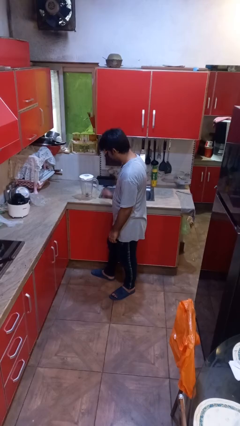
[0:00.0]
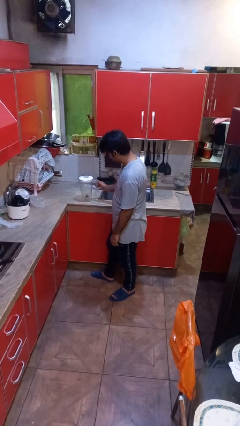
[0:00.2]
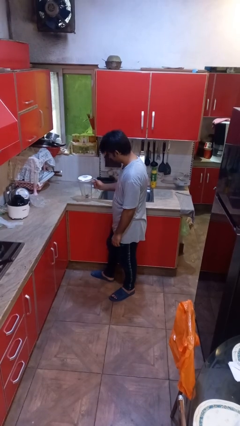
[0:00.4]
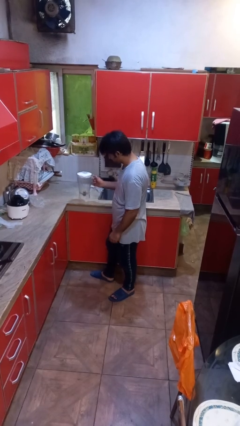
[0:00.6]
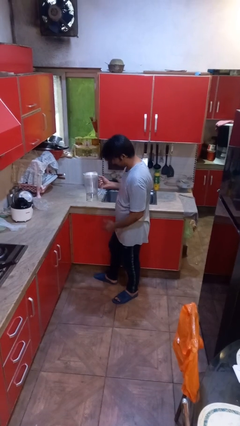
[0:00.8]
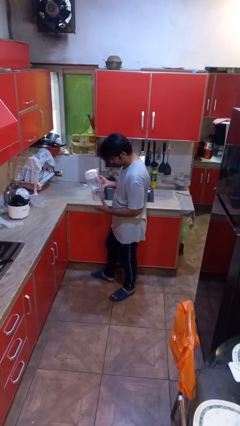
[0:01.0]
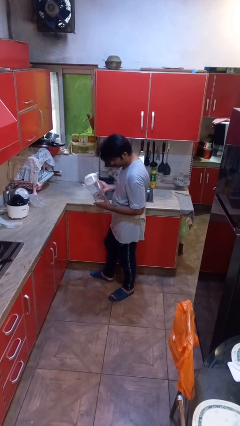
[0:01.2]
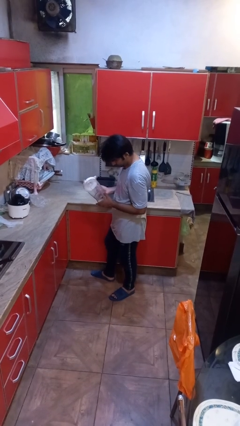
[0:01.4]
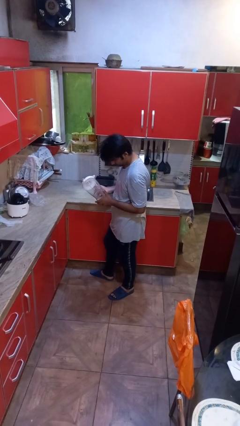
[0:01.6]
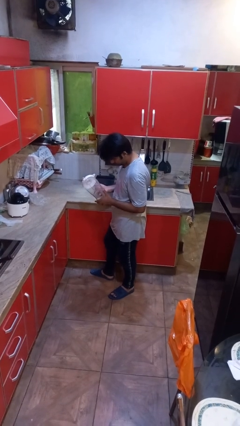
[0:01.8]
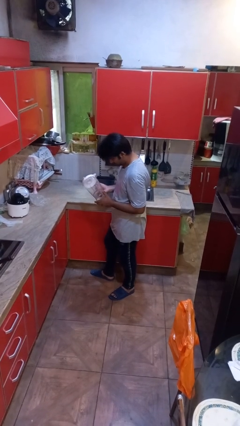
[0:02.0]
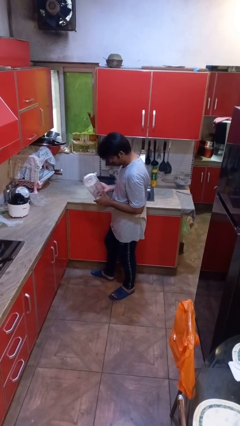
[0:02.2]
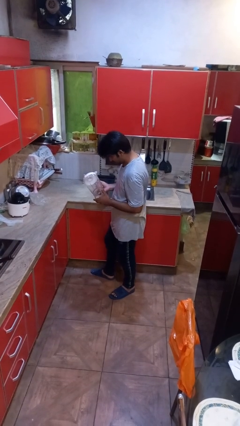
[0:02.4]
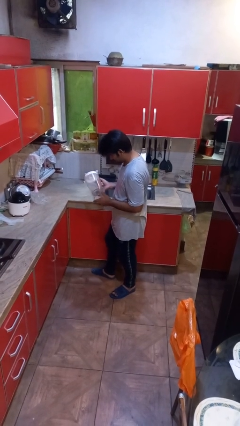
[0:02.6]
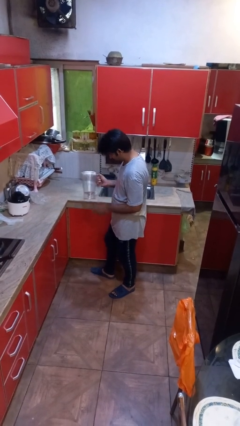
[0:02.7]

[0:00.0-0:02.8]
person picks up object from countertop

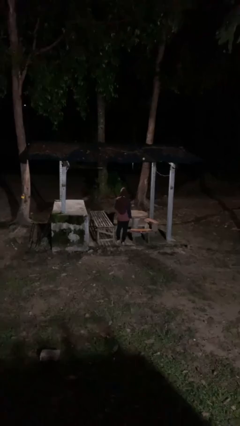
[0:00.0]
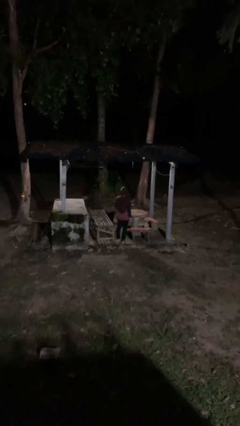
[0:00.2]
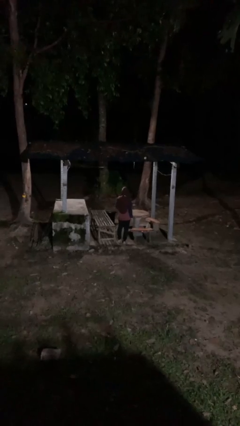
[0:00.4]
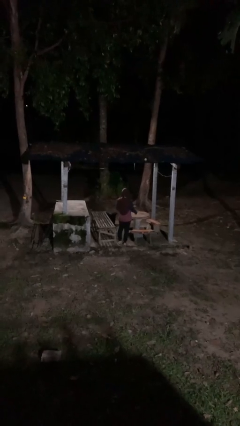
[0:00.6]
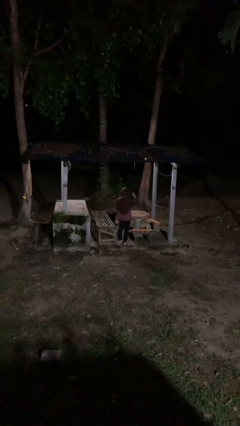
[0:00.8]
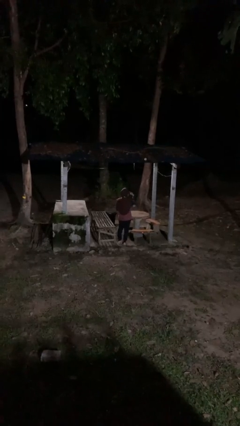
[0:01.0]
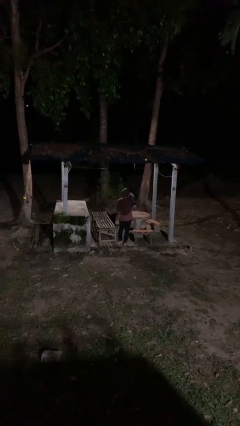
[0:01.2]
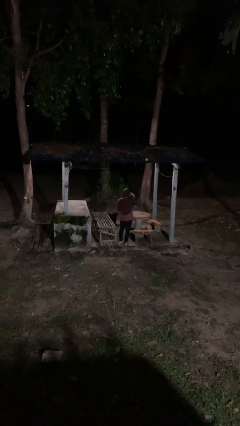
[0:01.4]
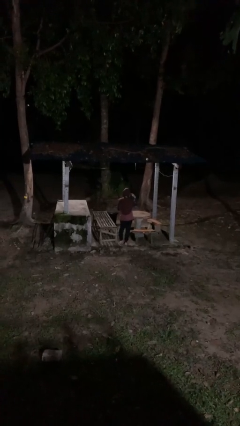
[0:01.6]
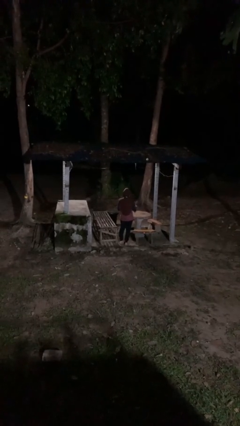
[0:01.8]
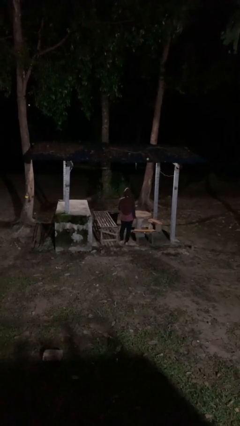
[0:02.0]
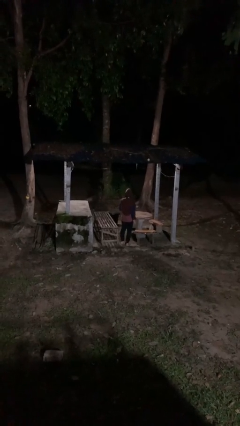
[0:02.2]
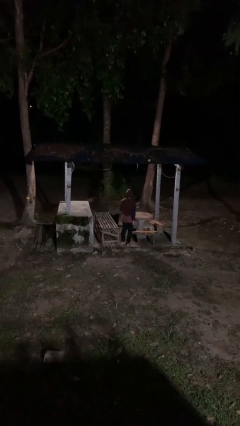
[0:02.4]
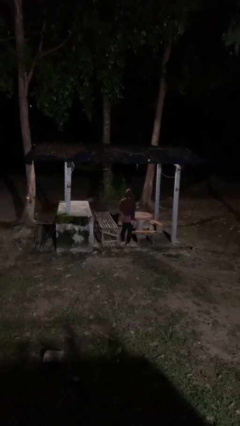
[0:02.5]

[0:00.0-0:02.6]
person gestures watch closely

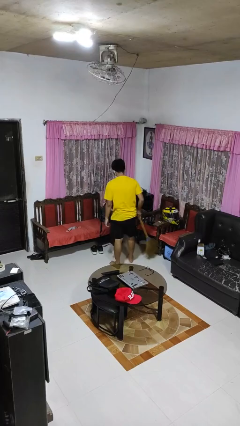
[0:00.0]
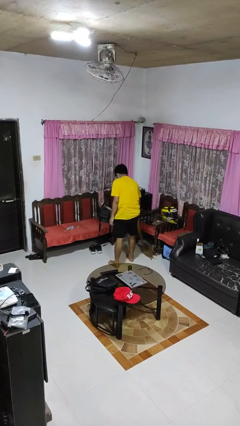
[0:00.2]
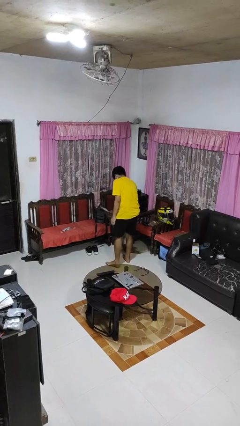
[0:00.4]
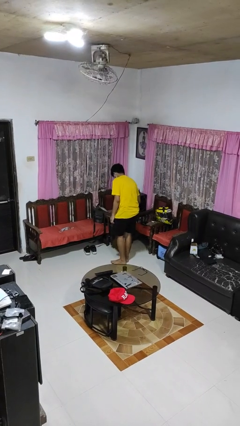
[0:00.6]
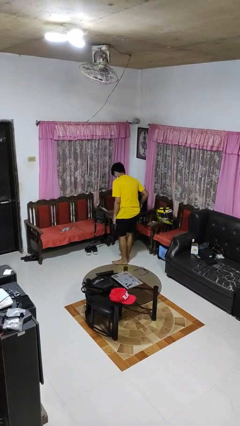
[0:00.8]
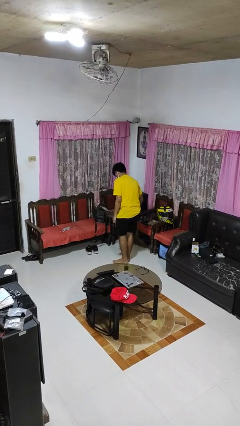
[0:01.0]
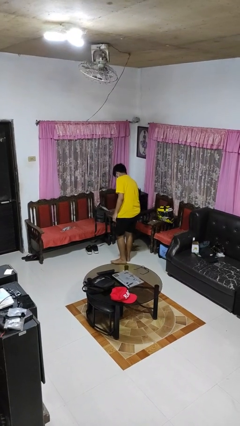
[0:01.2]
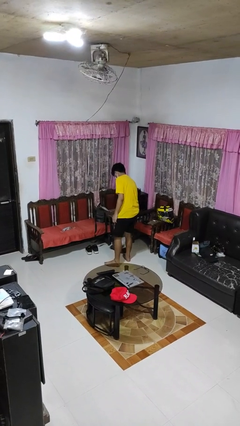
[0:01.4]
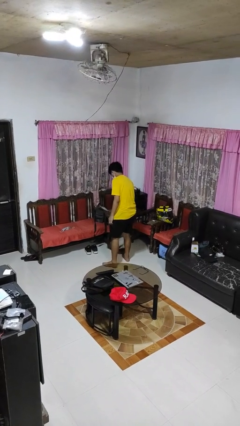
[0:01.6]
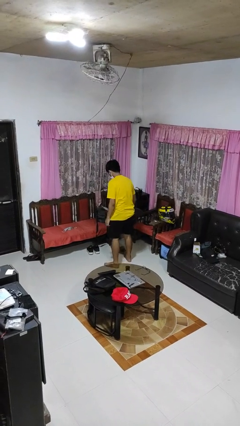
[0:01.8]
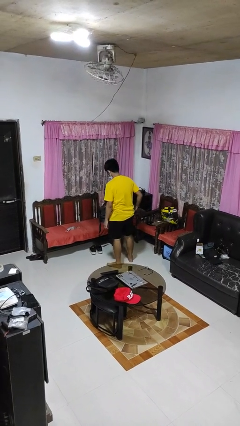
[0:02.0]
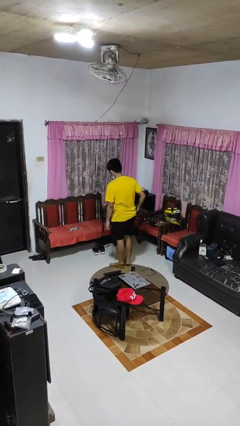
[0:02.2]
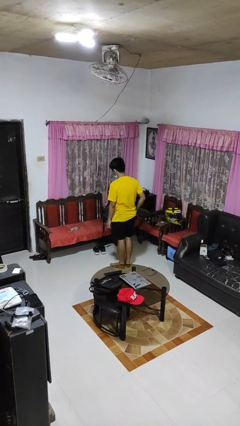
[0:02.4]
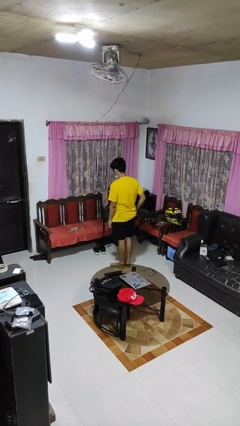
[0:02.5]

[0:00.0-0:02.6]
person sweeps floor

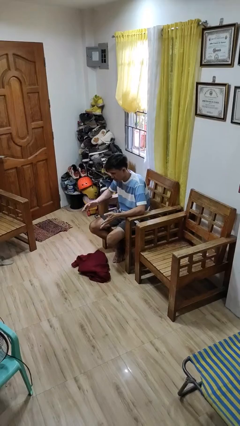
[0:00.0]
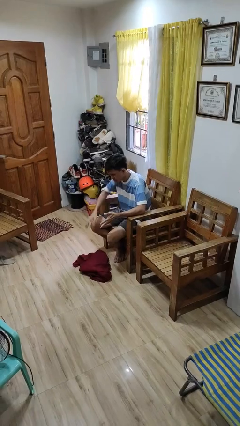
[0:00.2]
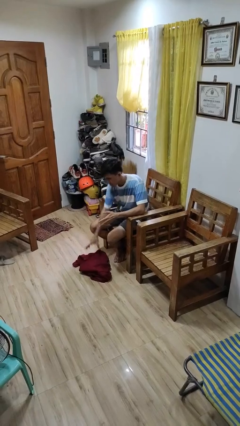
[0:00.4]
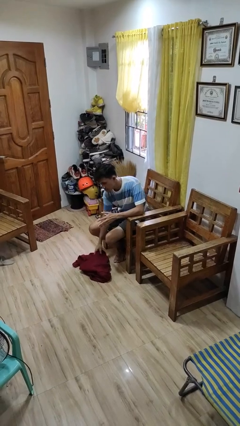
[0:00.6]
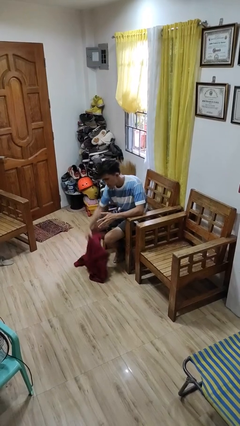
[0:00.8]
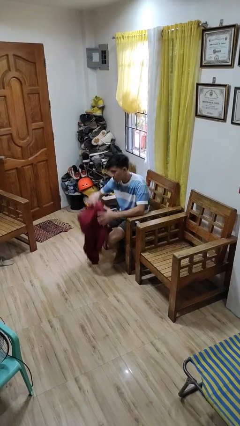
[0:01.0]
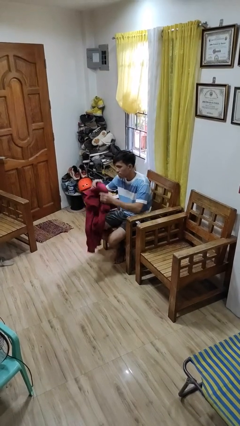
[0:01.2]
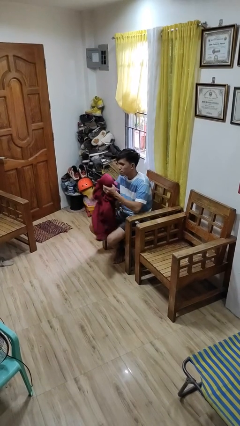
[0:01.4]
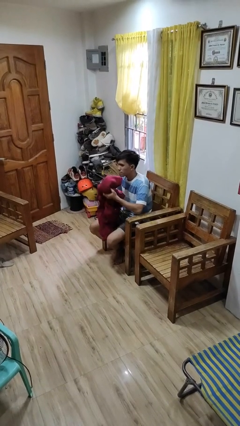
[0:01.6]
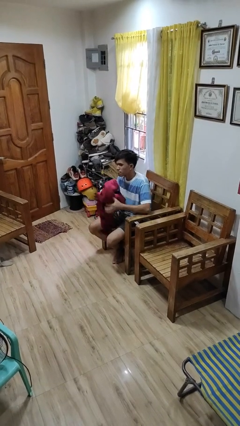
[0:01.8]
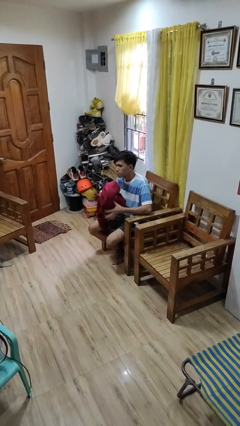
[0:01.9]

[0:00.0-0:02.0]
person picks up object from floor

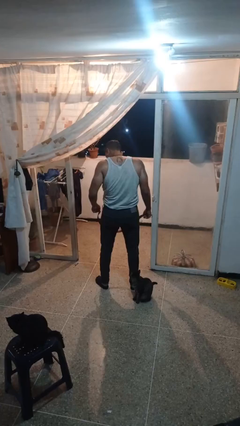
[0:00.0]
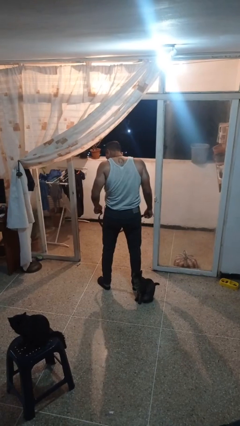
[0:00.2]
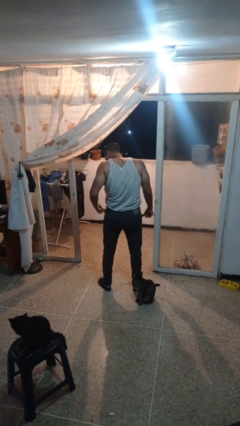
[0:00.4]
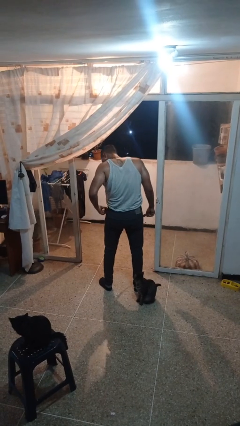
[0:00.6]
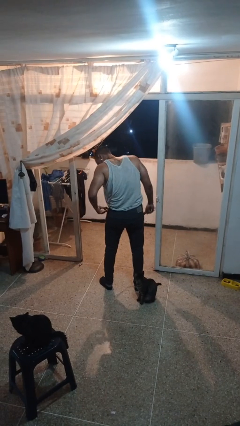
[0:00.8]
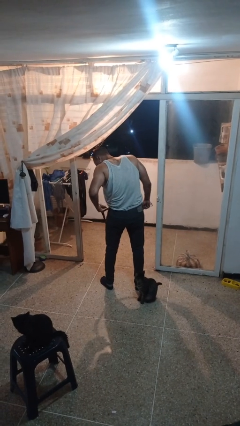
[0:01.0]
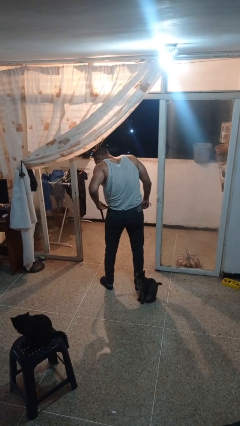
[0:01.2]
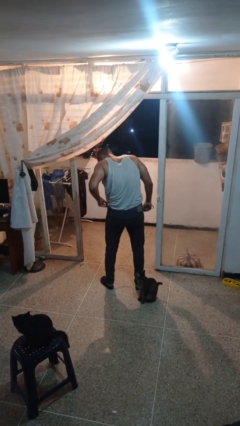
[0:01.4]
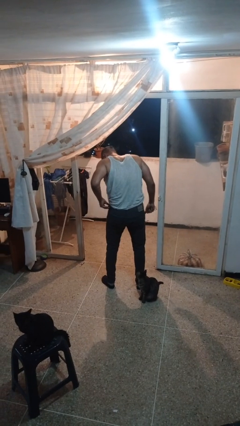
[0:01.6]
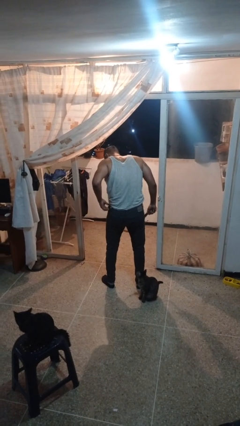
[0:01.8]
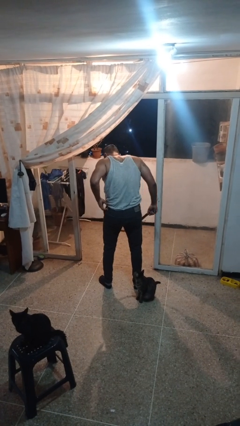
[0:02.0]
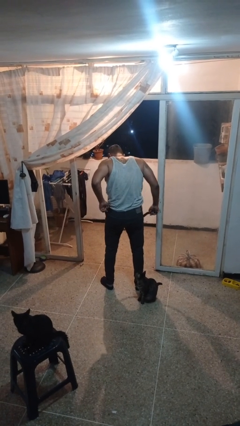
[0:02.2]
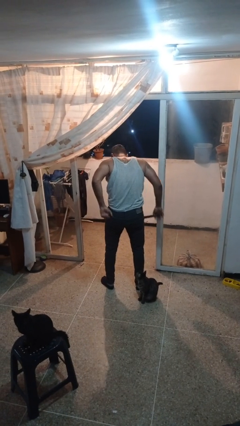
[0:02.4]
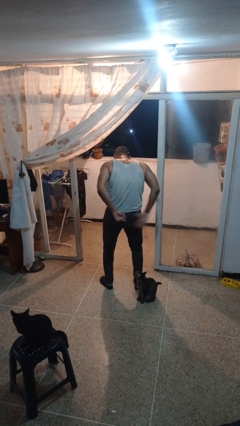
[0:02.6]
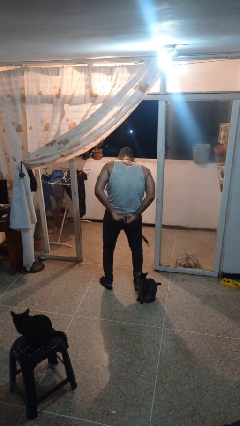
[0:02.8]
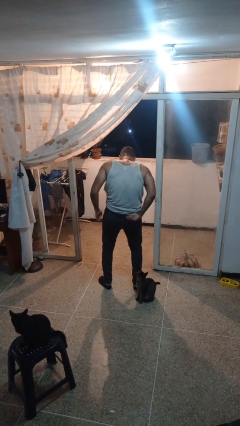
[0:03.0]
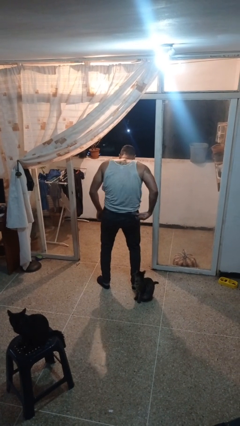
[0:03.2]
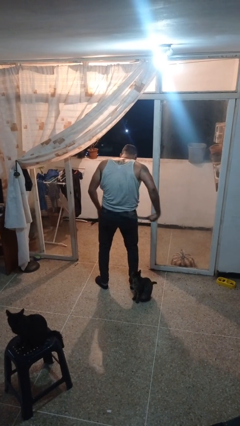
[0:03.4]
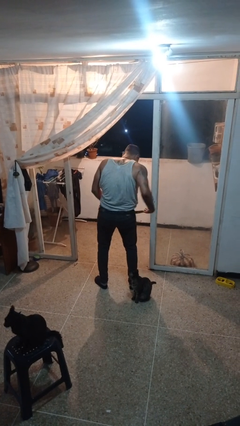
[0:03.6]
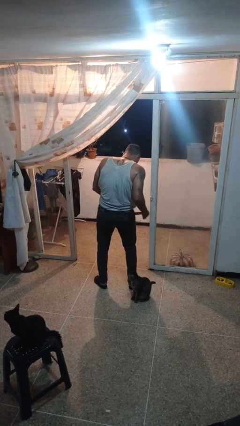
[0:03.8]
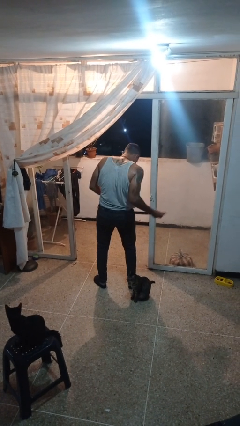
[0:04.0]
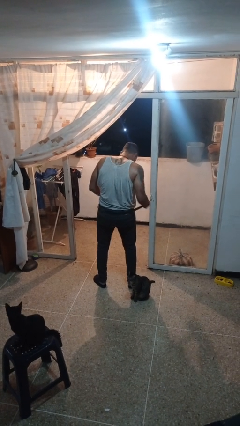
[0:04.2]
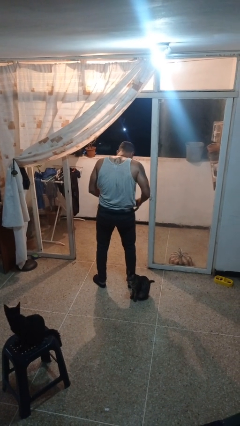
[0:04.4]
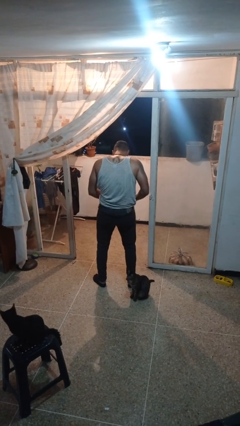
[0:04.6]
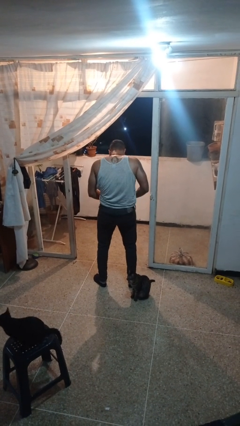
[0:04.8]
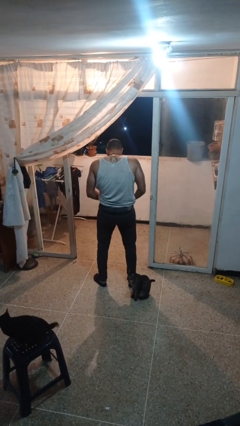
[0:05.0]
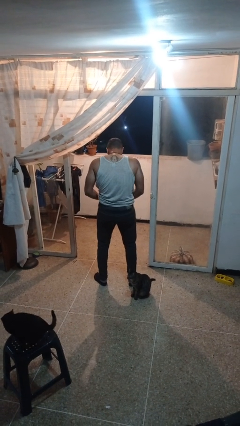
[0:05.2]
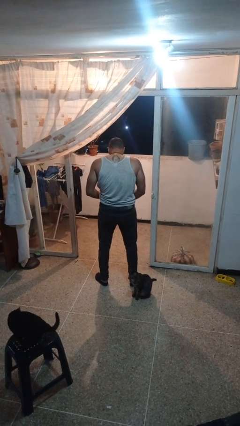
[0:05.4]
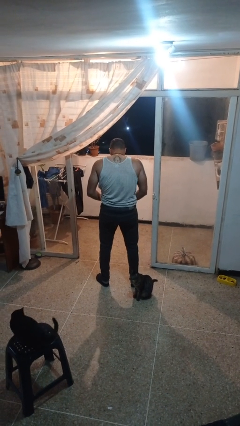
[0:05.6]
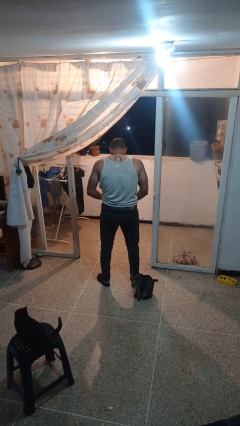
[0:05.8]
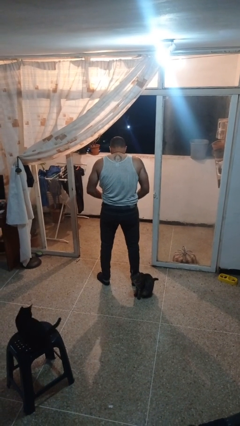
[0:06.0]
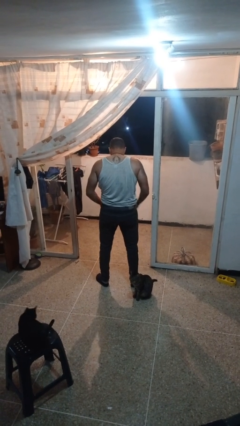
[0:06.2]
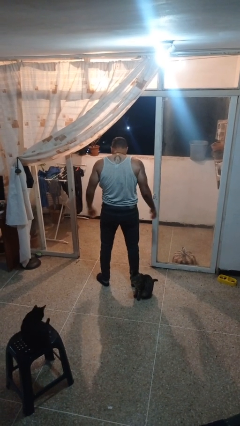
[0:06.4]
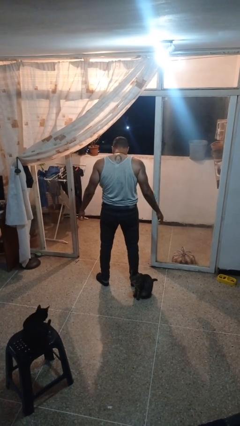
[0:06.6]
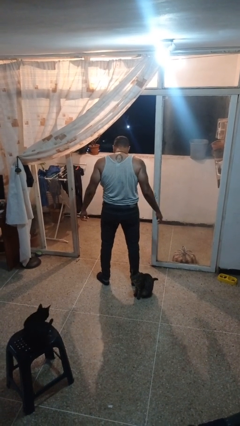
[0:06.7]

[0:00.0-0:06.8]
person puts on belt

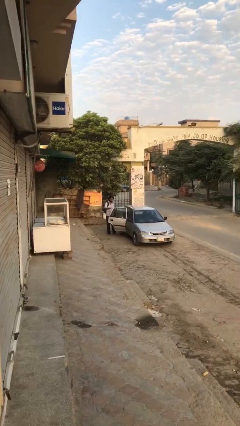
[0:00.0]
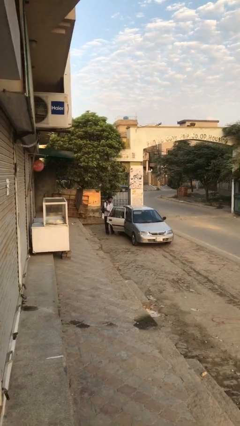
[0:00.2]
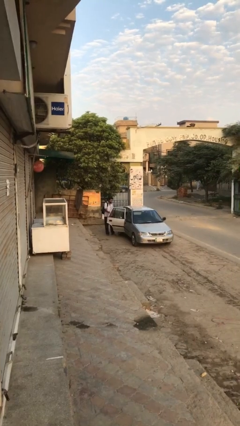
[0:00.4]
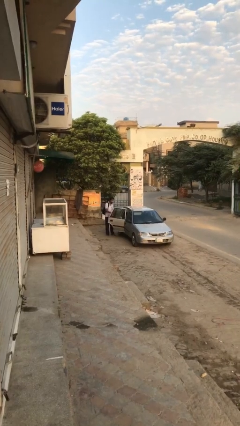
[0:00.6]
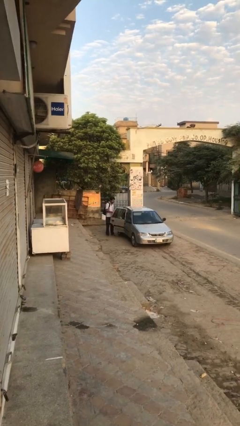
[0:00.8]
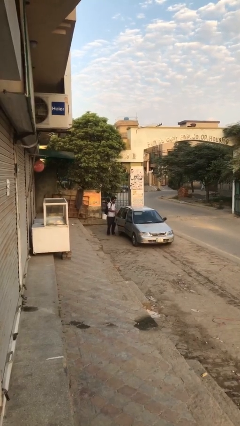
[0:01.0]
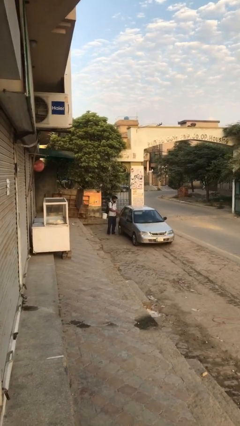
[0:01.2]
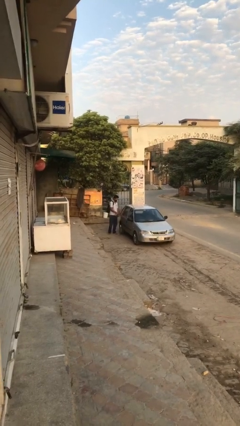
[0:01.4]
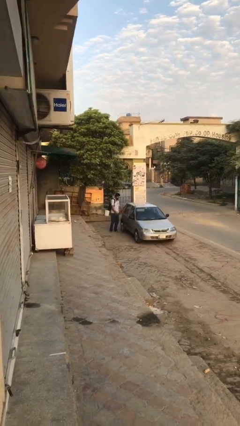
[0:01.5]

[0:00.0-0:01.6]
person closes car door
